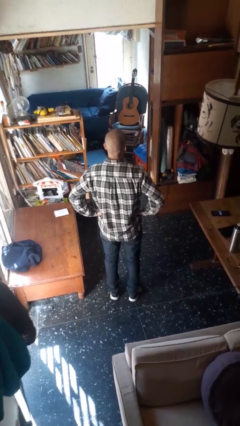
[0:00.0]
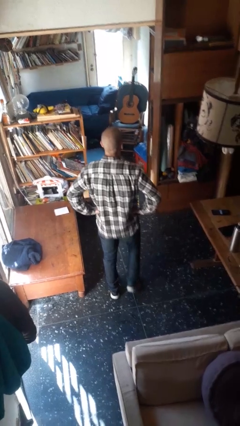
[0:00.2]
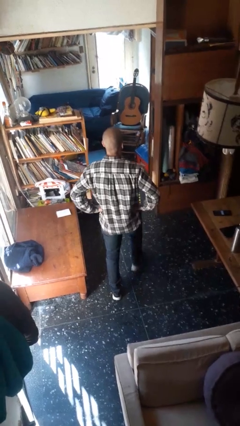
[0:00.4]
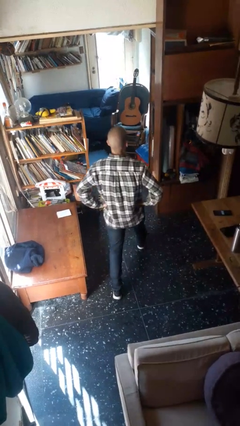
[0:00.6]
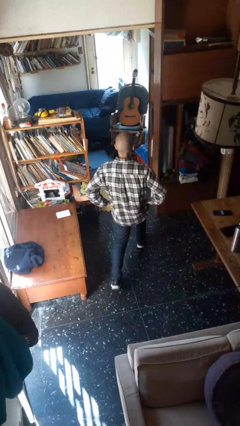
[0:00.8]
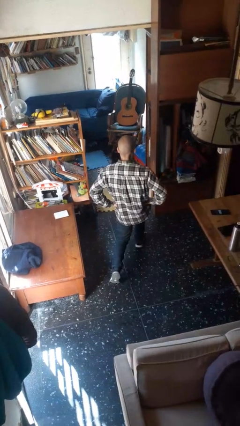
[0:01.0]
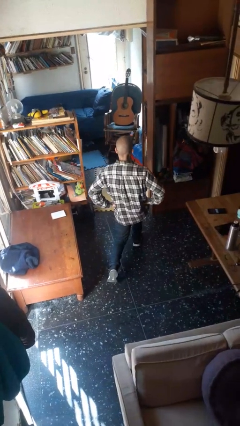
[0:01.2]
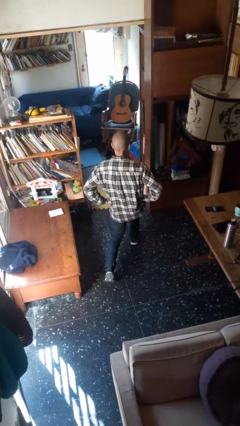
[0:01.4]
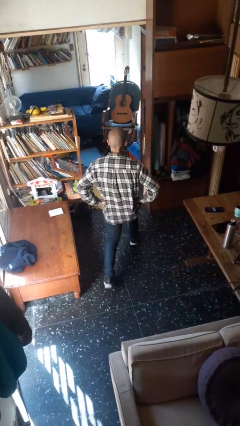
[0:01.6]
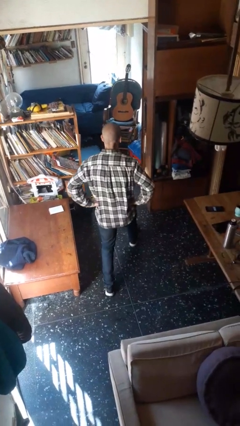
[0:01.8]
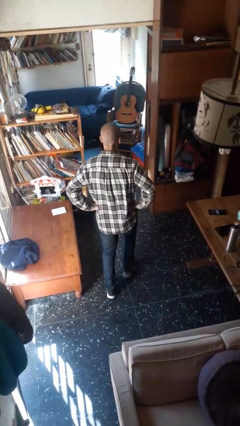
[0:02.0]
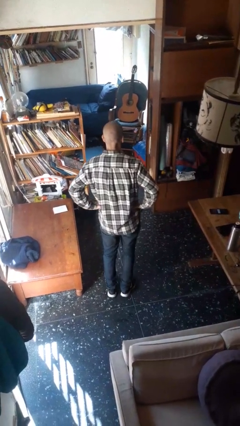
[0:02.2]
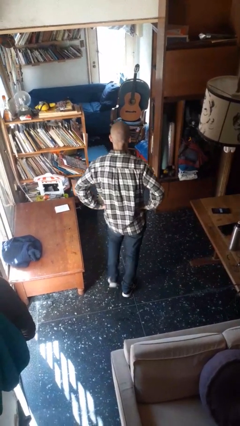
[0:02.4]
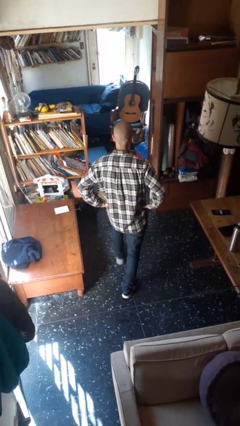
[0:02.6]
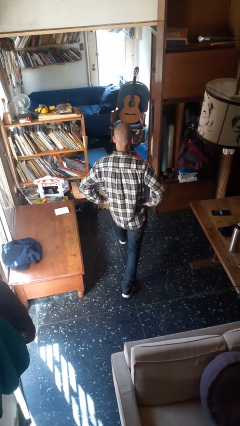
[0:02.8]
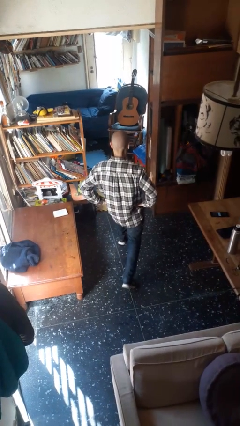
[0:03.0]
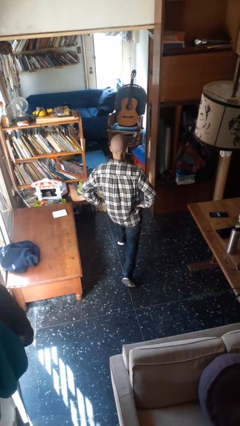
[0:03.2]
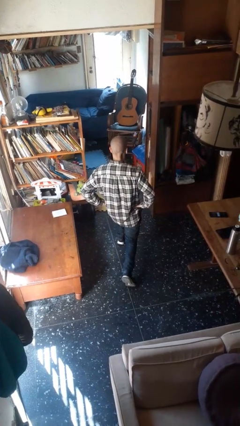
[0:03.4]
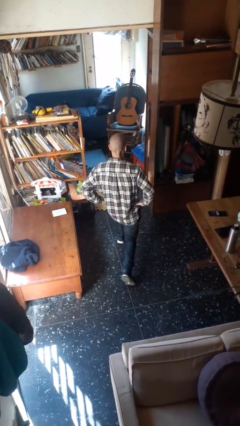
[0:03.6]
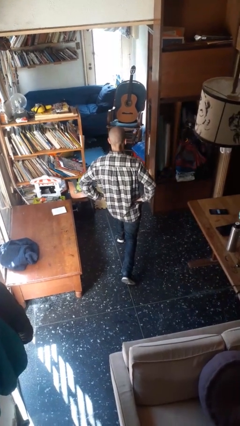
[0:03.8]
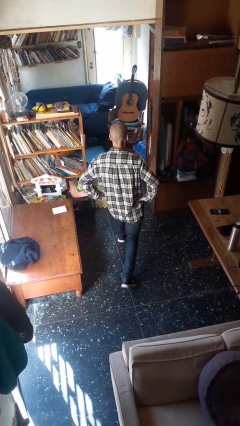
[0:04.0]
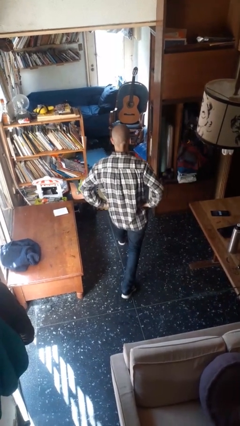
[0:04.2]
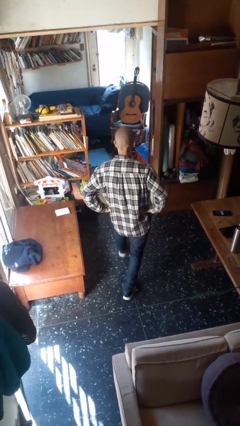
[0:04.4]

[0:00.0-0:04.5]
person exercises with lunges

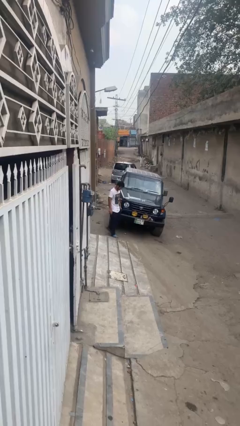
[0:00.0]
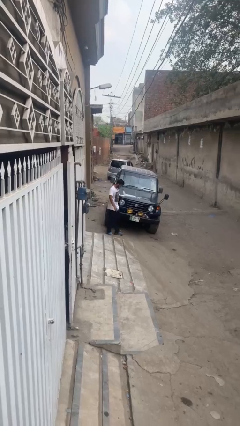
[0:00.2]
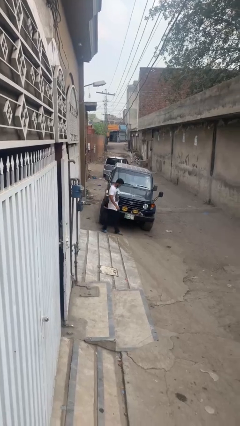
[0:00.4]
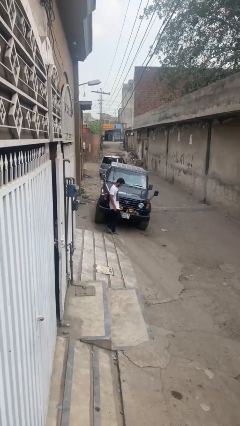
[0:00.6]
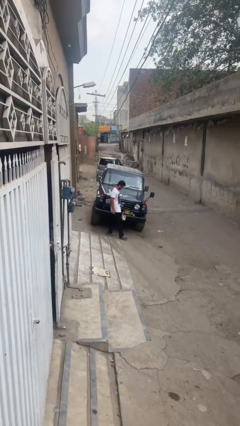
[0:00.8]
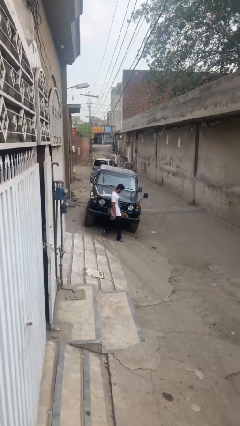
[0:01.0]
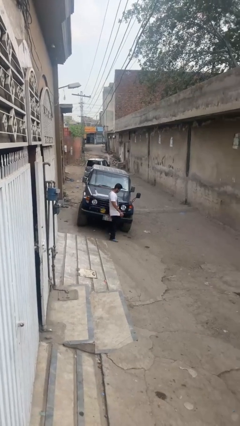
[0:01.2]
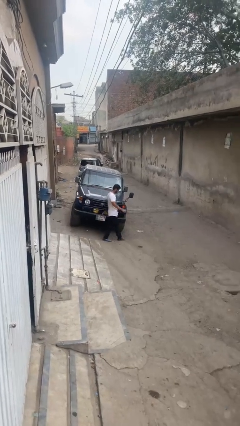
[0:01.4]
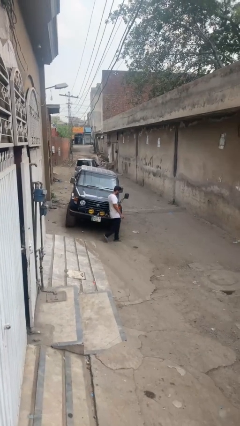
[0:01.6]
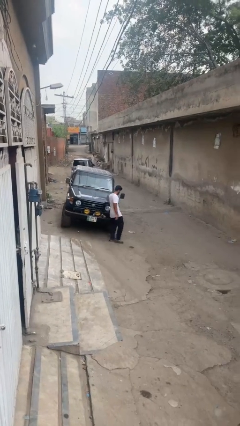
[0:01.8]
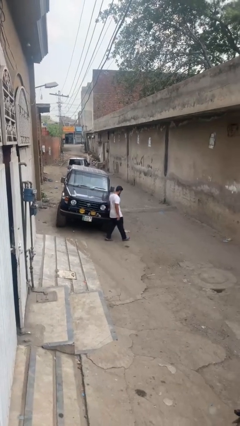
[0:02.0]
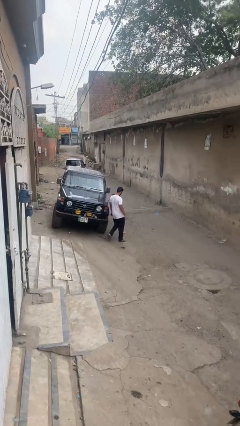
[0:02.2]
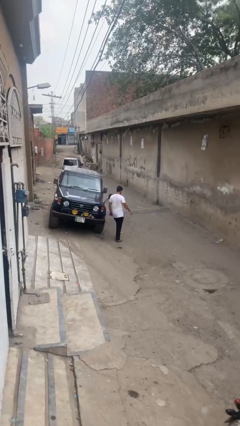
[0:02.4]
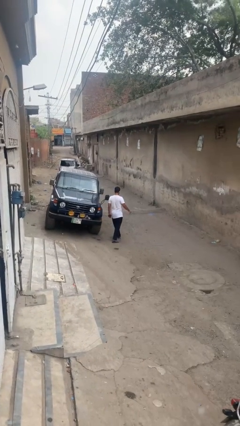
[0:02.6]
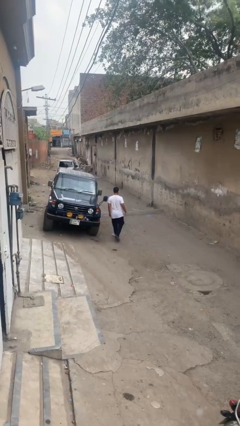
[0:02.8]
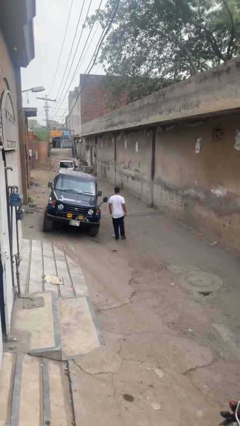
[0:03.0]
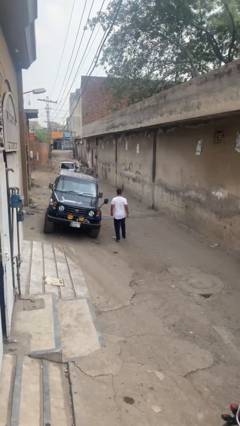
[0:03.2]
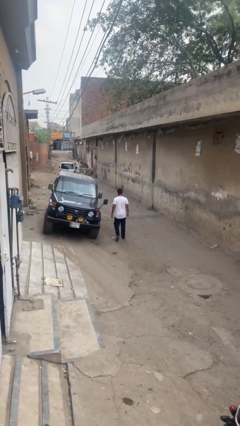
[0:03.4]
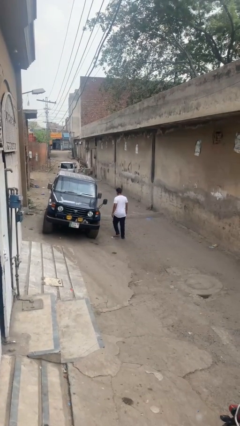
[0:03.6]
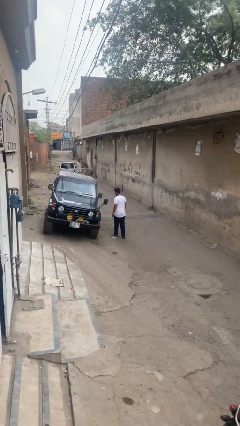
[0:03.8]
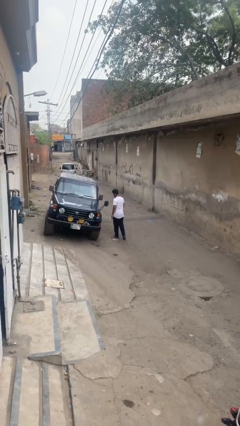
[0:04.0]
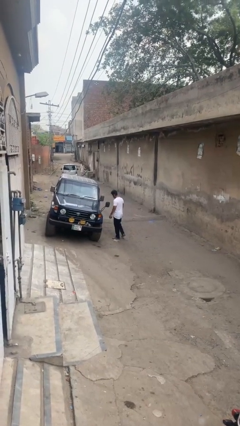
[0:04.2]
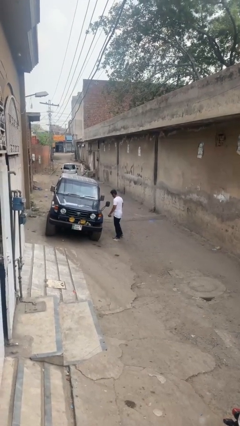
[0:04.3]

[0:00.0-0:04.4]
person walks around car

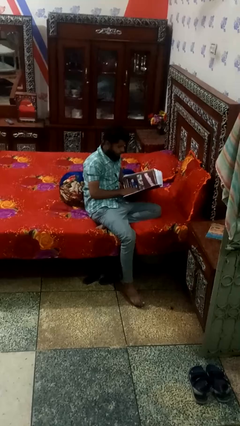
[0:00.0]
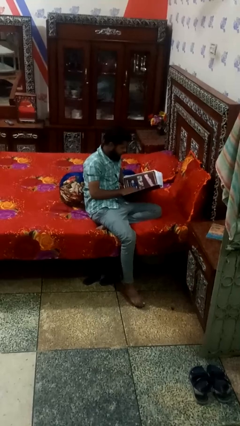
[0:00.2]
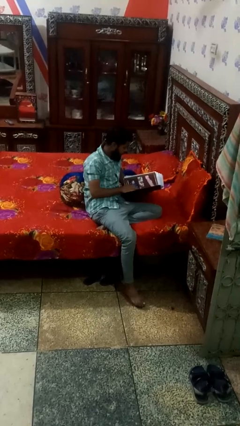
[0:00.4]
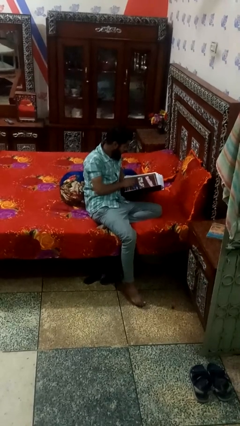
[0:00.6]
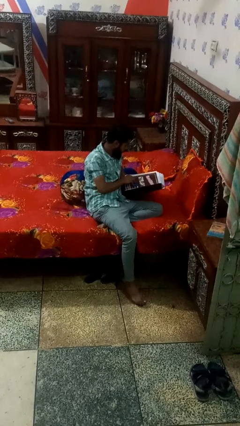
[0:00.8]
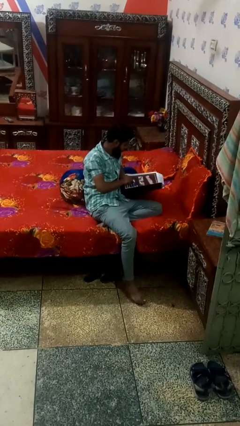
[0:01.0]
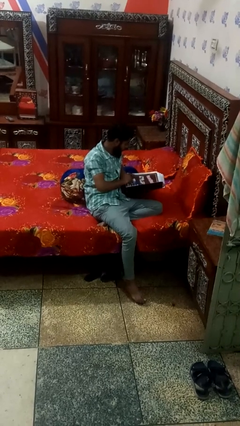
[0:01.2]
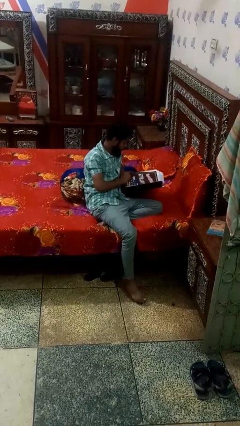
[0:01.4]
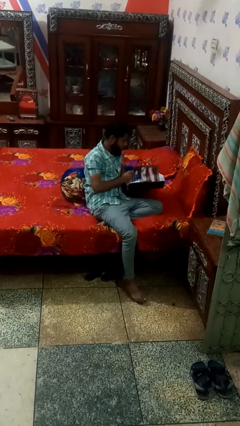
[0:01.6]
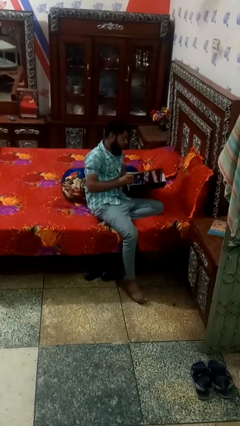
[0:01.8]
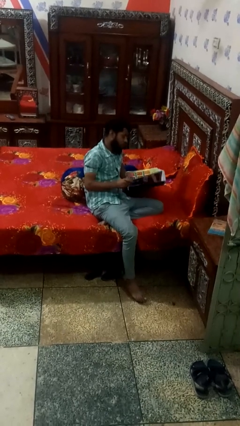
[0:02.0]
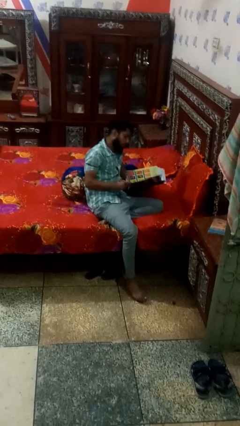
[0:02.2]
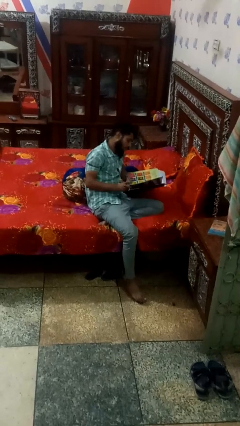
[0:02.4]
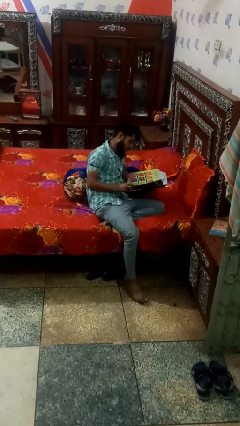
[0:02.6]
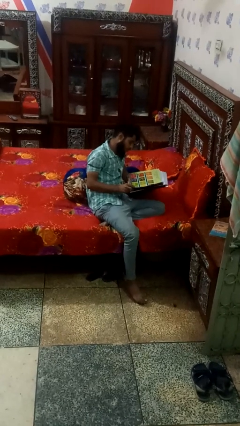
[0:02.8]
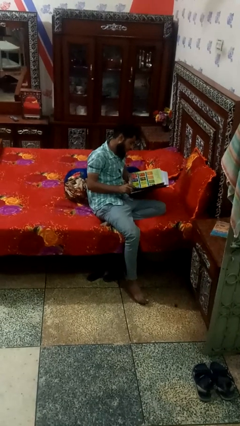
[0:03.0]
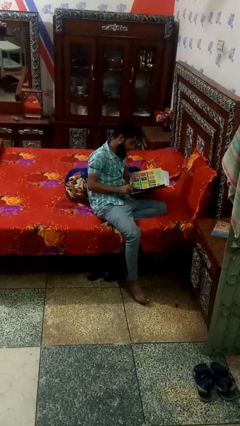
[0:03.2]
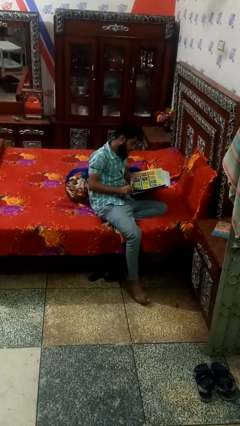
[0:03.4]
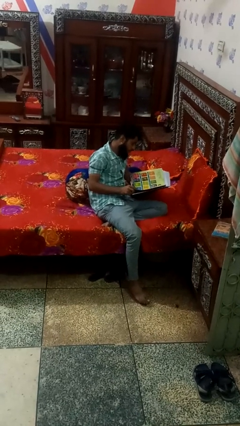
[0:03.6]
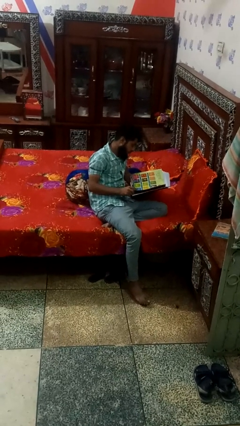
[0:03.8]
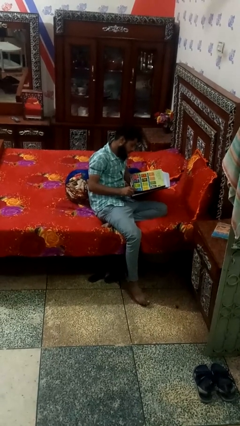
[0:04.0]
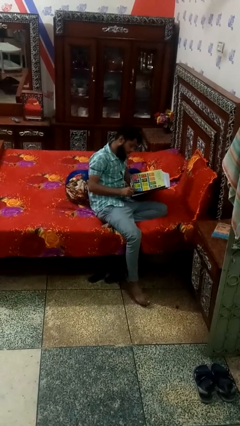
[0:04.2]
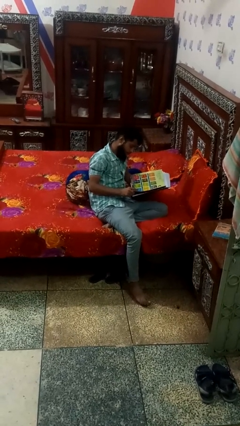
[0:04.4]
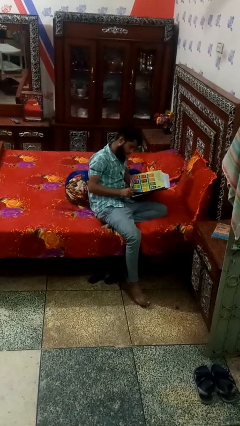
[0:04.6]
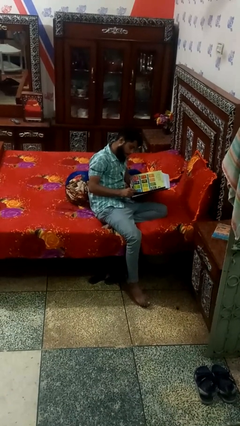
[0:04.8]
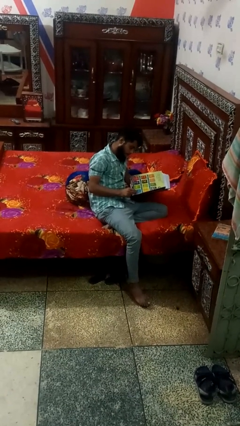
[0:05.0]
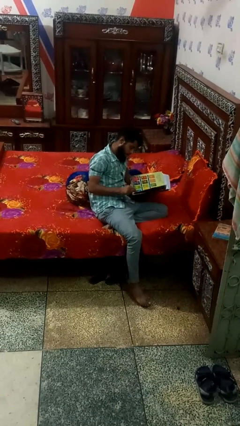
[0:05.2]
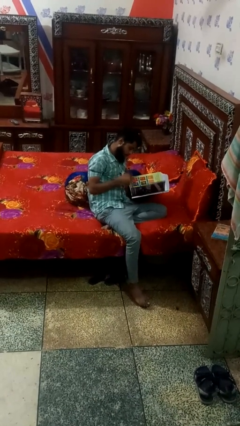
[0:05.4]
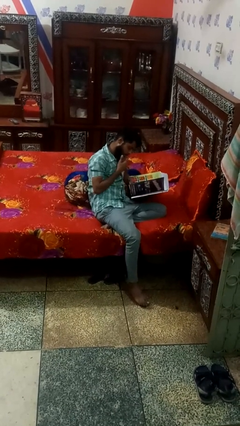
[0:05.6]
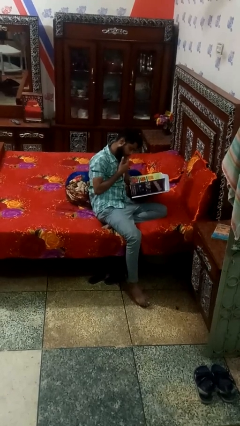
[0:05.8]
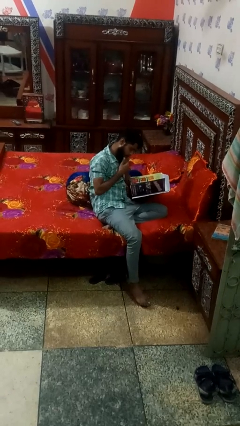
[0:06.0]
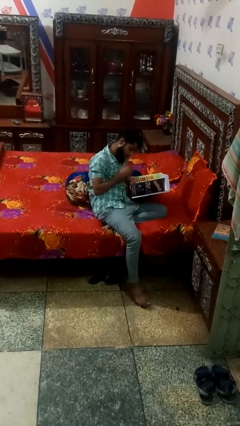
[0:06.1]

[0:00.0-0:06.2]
person reads magazine

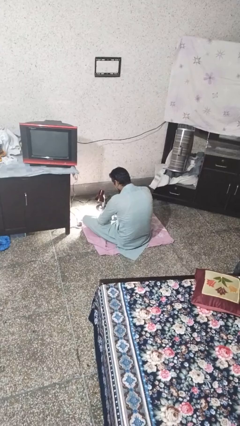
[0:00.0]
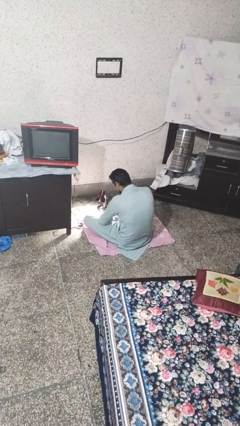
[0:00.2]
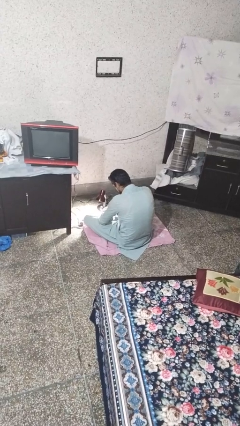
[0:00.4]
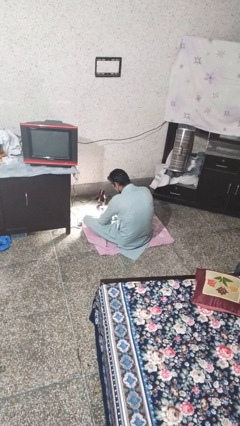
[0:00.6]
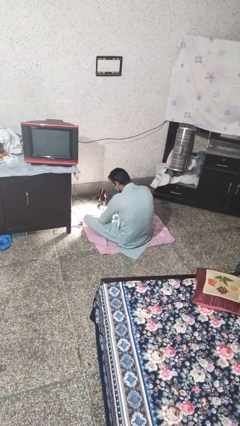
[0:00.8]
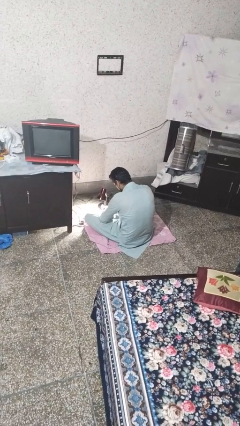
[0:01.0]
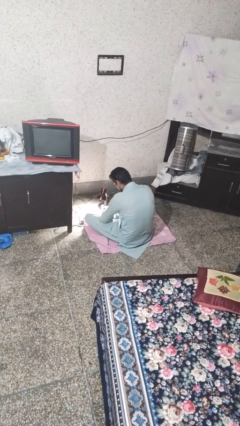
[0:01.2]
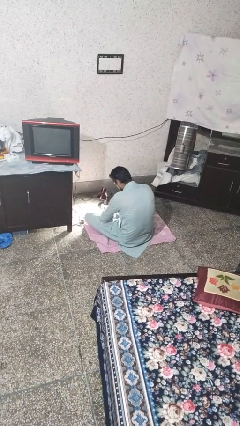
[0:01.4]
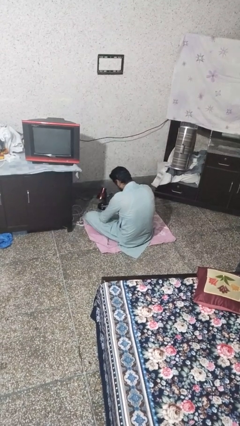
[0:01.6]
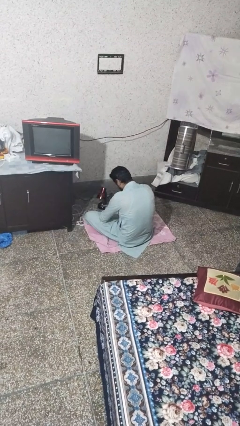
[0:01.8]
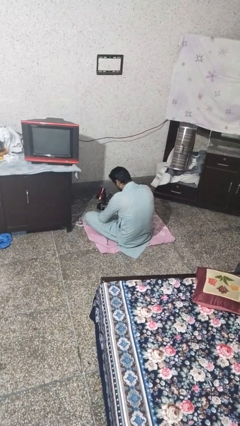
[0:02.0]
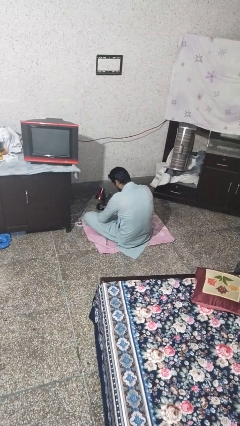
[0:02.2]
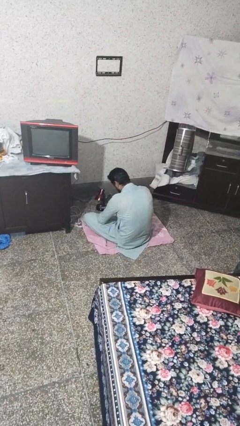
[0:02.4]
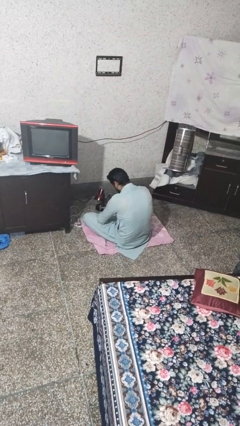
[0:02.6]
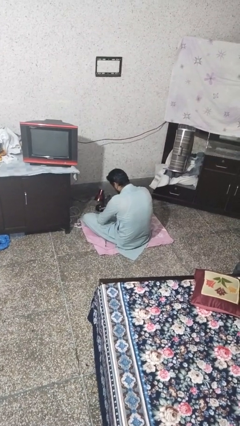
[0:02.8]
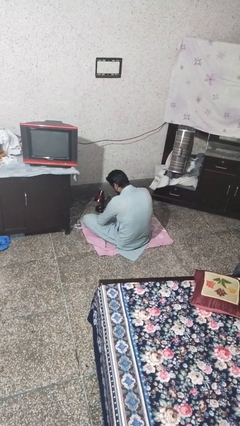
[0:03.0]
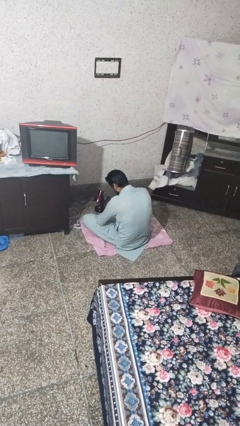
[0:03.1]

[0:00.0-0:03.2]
person turns off lamp
